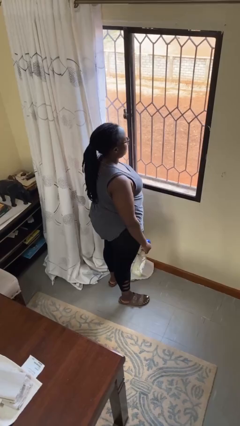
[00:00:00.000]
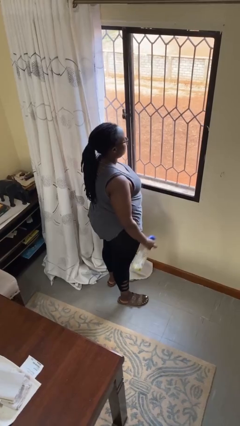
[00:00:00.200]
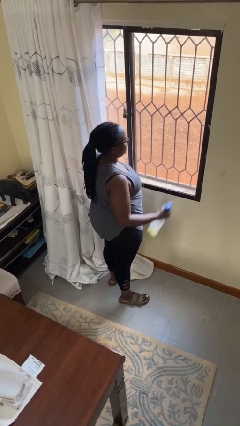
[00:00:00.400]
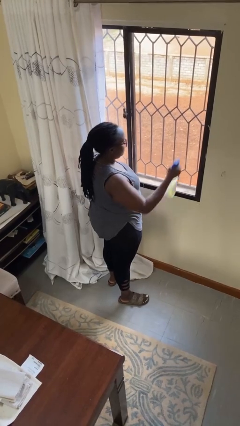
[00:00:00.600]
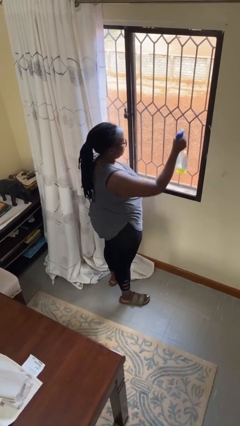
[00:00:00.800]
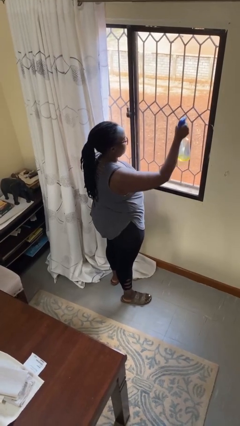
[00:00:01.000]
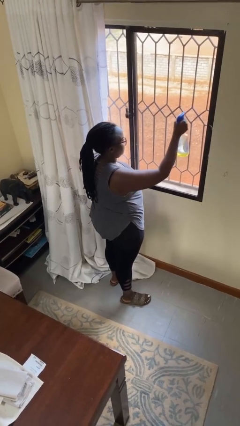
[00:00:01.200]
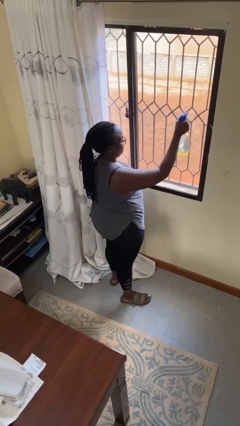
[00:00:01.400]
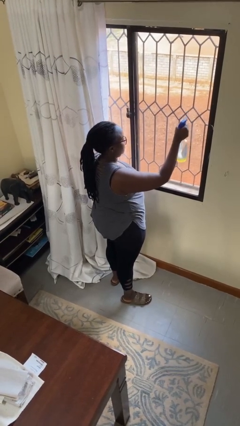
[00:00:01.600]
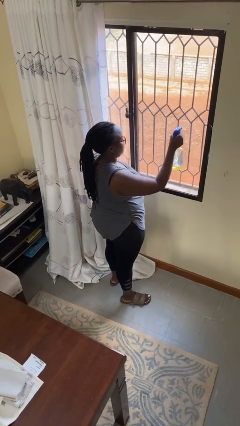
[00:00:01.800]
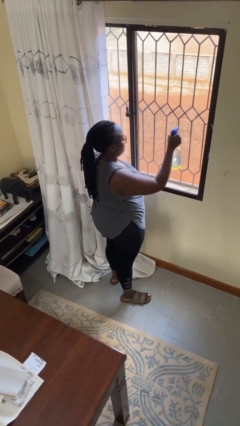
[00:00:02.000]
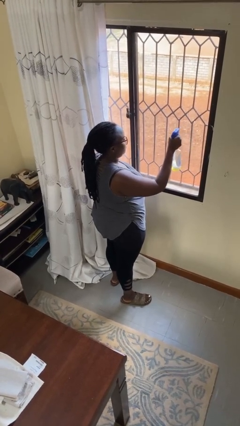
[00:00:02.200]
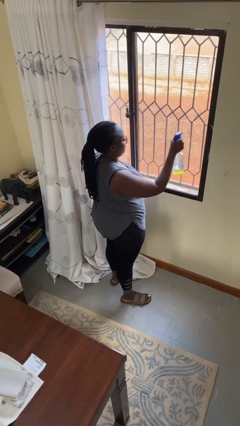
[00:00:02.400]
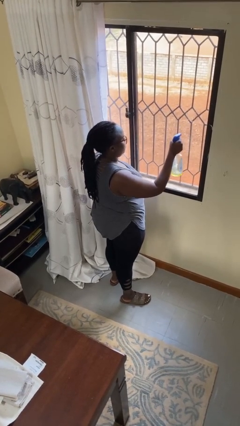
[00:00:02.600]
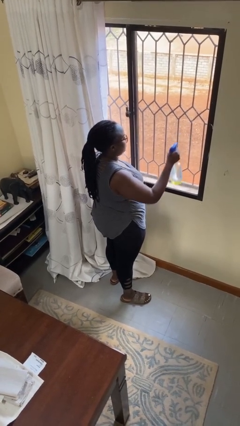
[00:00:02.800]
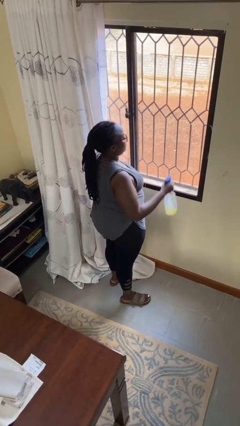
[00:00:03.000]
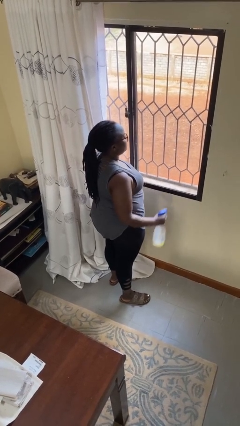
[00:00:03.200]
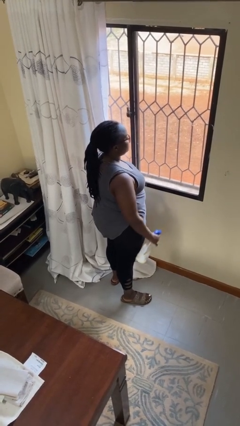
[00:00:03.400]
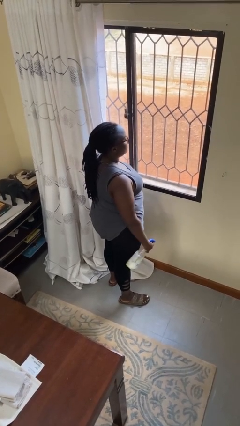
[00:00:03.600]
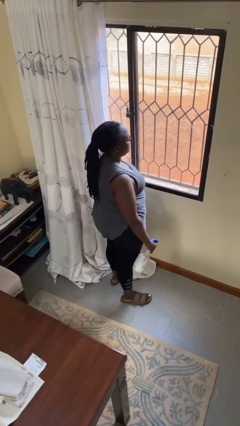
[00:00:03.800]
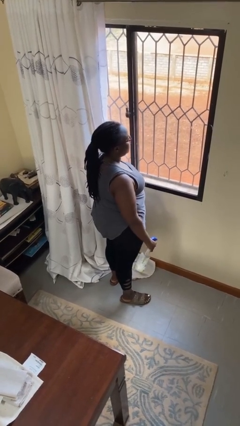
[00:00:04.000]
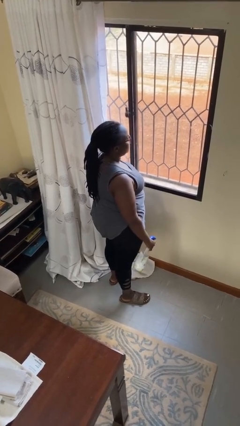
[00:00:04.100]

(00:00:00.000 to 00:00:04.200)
person sprays from bottle

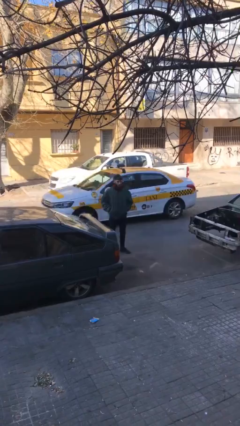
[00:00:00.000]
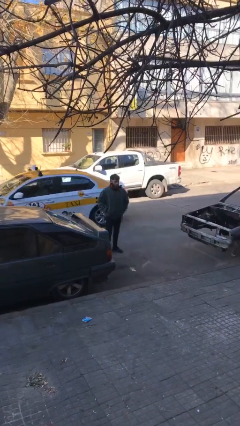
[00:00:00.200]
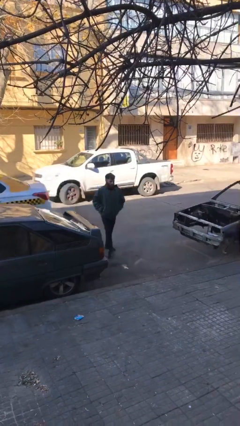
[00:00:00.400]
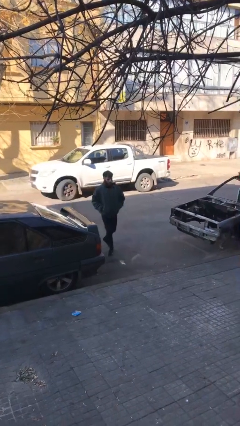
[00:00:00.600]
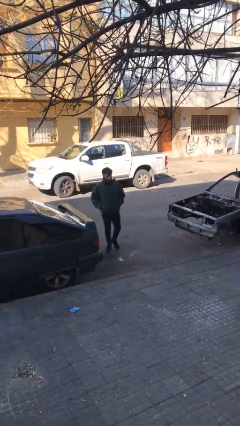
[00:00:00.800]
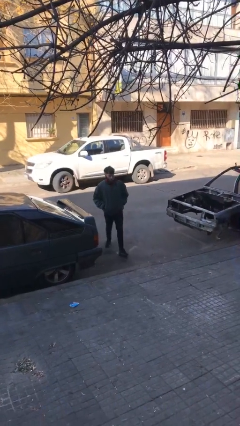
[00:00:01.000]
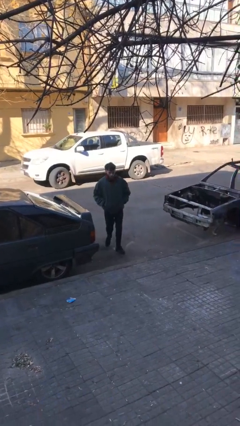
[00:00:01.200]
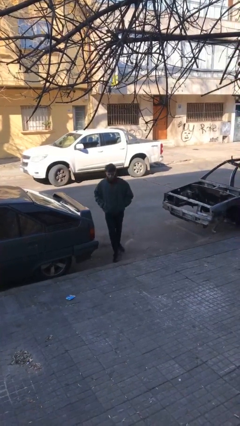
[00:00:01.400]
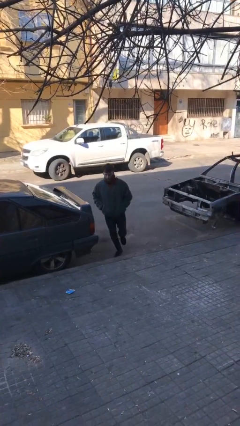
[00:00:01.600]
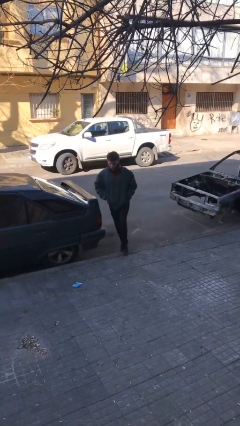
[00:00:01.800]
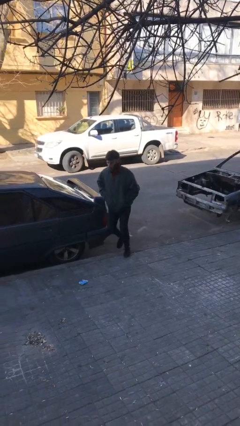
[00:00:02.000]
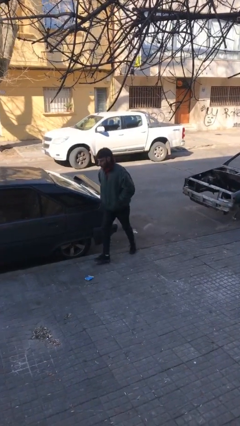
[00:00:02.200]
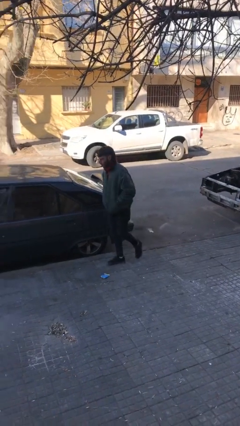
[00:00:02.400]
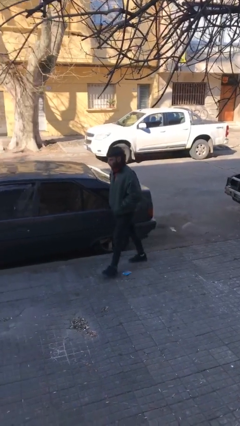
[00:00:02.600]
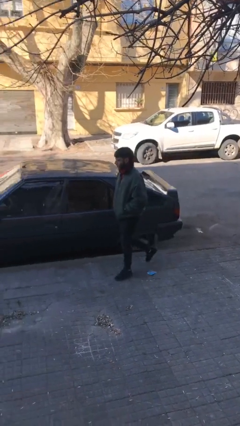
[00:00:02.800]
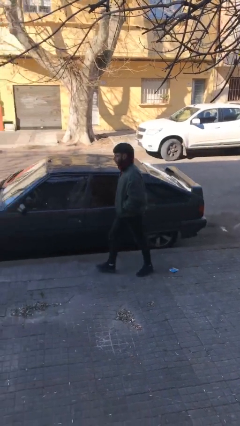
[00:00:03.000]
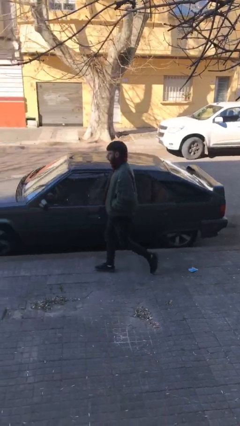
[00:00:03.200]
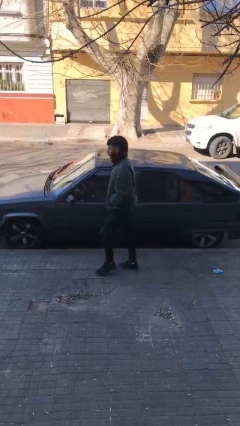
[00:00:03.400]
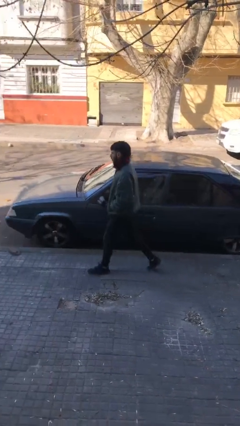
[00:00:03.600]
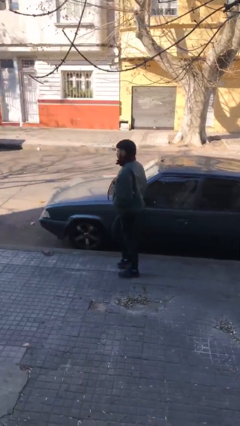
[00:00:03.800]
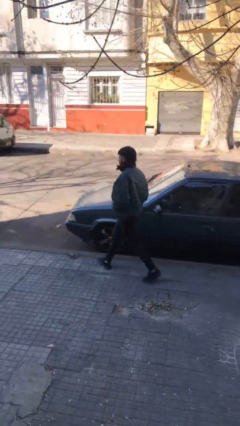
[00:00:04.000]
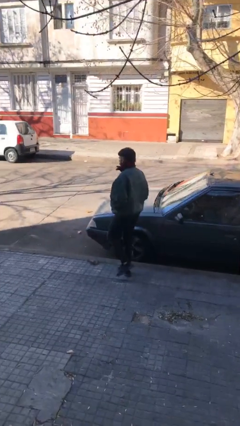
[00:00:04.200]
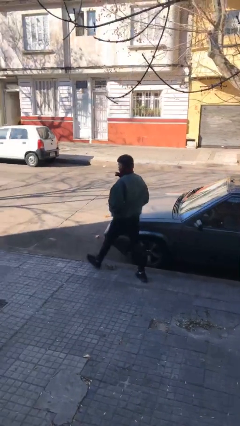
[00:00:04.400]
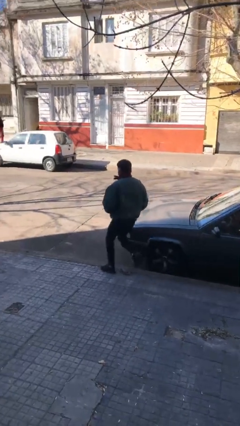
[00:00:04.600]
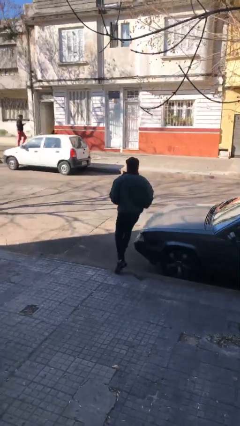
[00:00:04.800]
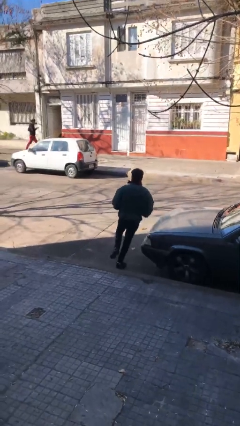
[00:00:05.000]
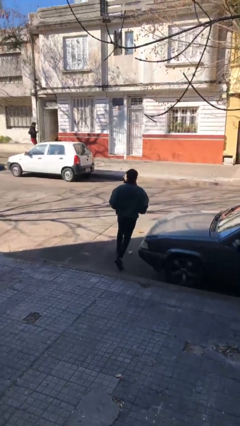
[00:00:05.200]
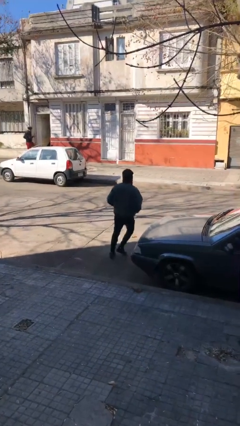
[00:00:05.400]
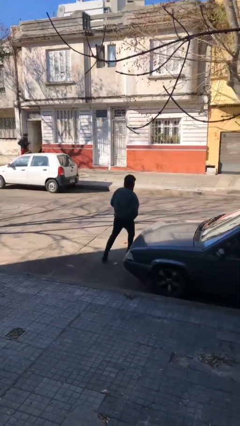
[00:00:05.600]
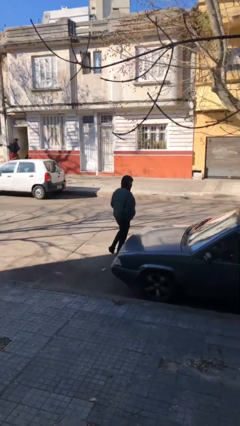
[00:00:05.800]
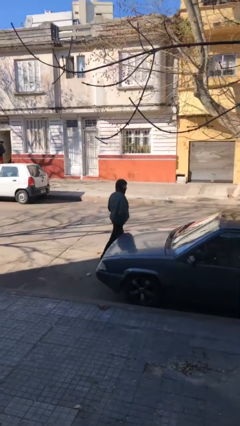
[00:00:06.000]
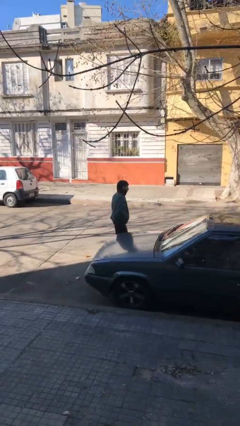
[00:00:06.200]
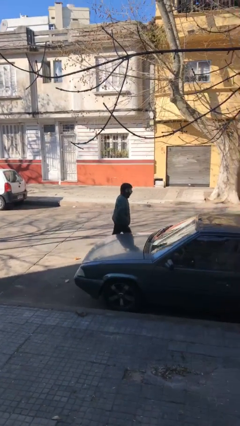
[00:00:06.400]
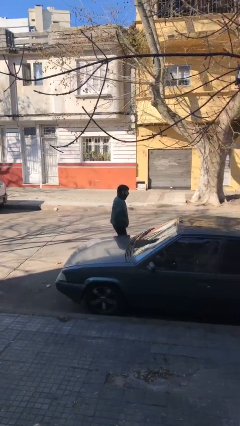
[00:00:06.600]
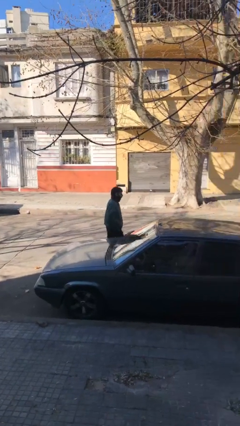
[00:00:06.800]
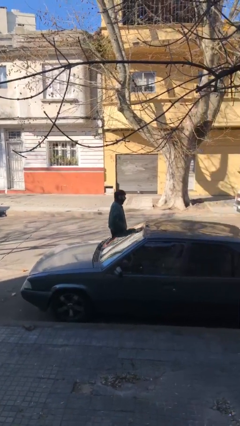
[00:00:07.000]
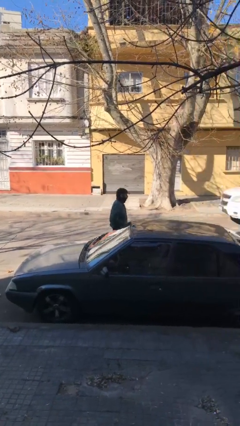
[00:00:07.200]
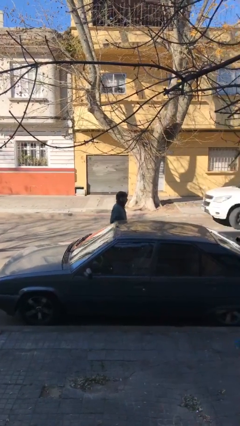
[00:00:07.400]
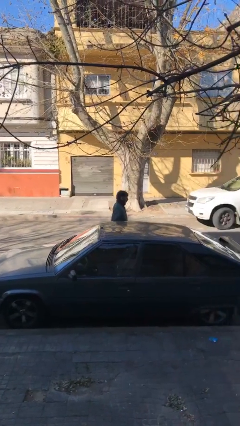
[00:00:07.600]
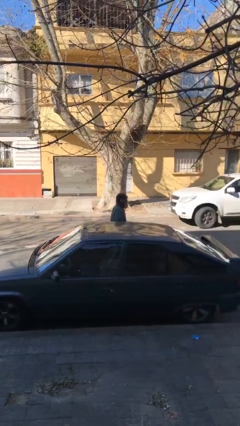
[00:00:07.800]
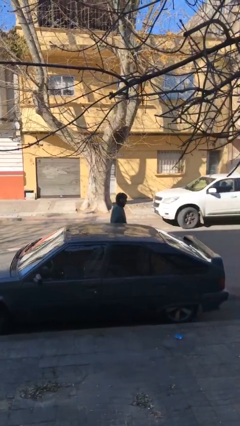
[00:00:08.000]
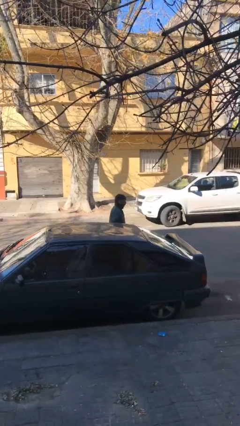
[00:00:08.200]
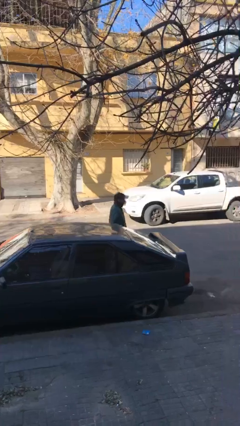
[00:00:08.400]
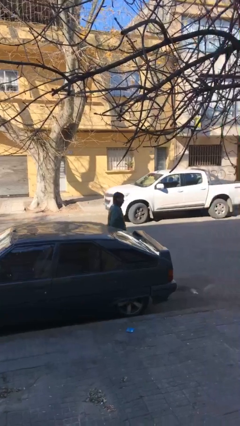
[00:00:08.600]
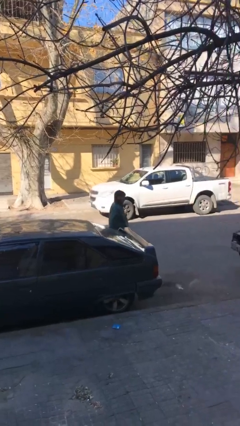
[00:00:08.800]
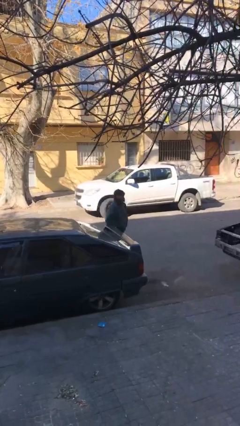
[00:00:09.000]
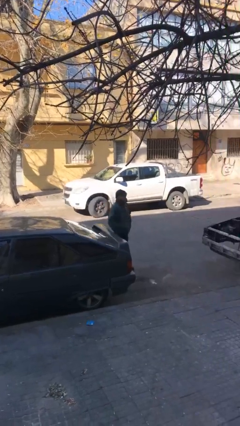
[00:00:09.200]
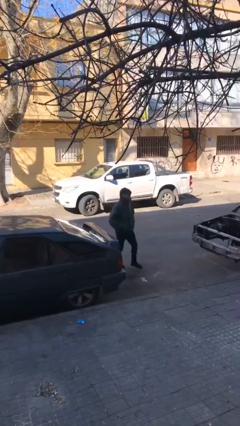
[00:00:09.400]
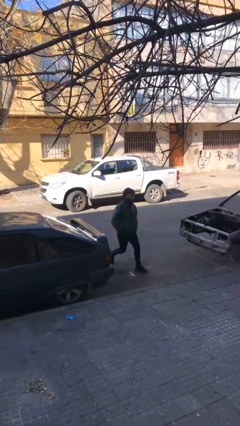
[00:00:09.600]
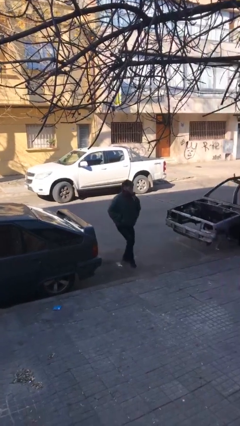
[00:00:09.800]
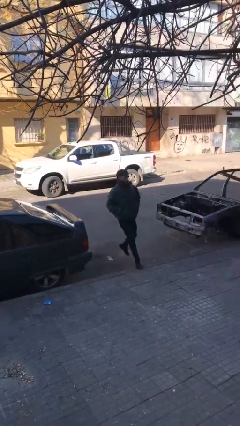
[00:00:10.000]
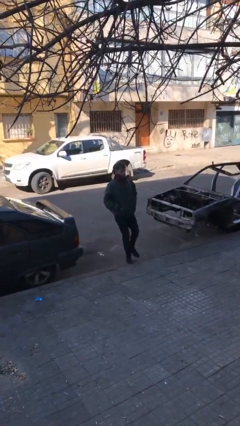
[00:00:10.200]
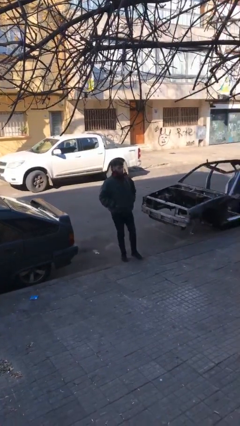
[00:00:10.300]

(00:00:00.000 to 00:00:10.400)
person walks around car

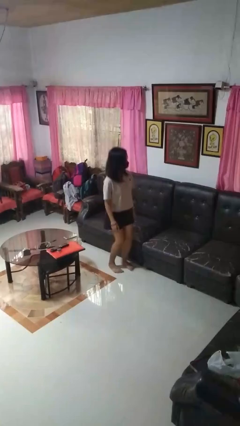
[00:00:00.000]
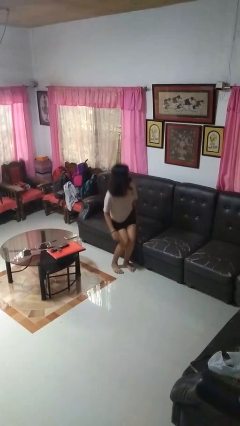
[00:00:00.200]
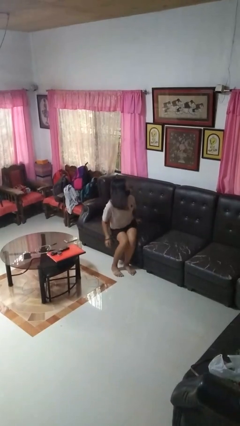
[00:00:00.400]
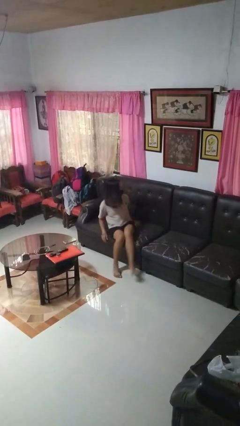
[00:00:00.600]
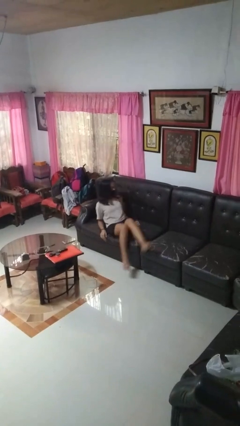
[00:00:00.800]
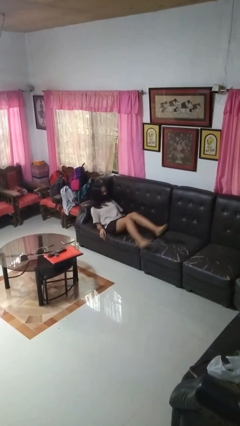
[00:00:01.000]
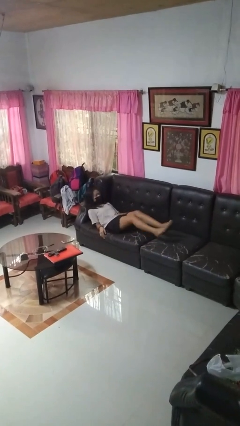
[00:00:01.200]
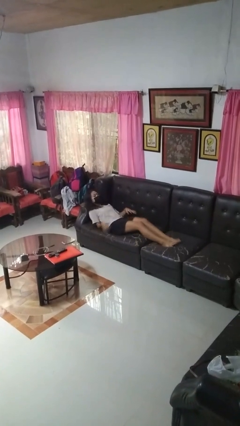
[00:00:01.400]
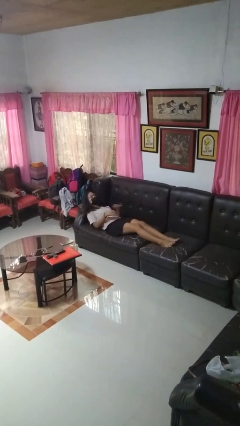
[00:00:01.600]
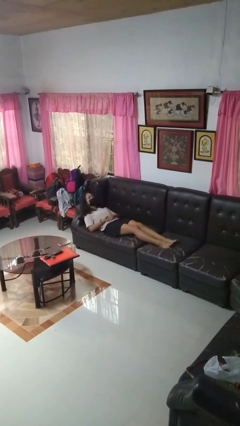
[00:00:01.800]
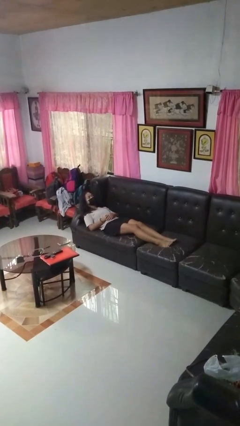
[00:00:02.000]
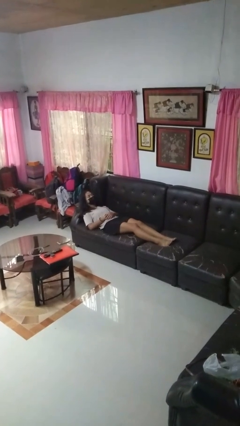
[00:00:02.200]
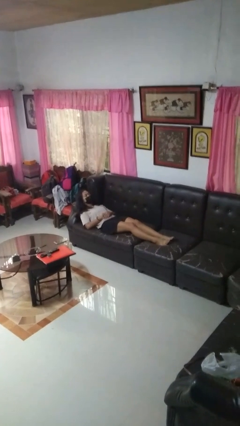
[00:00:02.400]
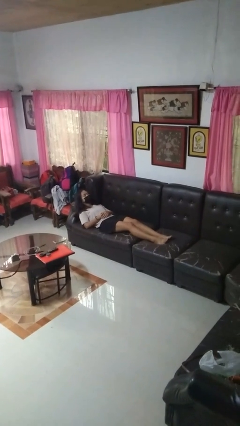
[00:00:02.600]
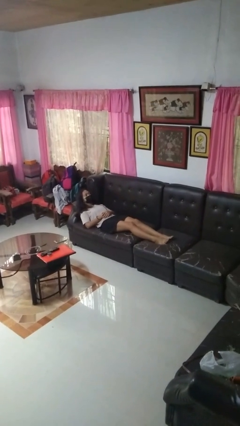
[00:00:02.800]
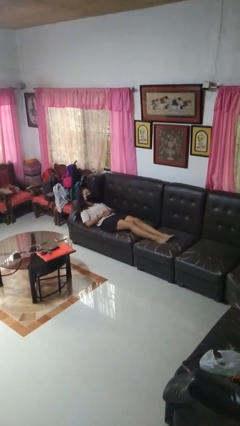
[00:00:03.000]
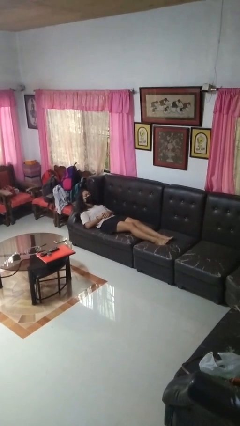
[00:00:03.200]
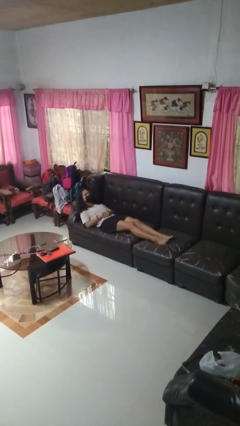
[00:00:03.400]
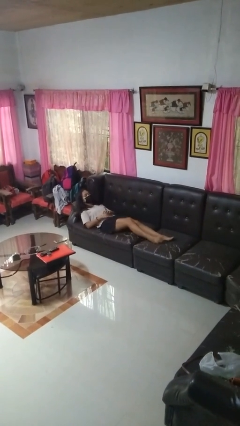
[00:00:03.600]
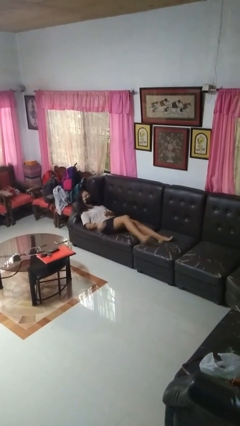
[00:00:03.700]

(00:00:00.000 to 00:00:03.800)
person lies down on couch
